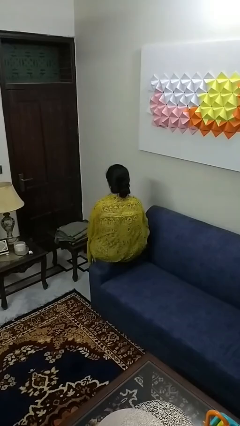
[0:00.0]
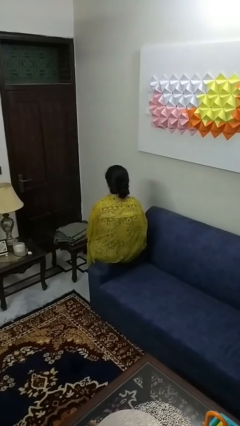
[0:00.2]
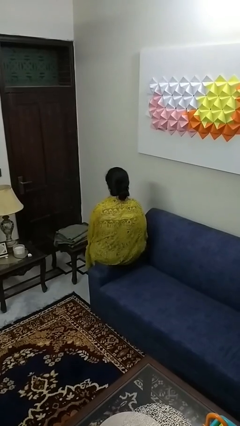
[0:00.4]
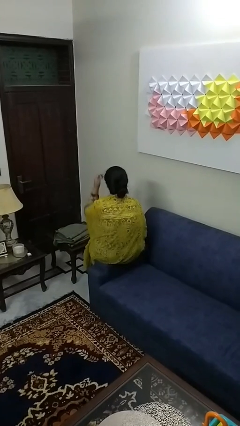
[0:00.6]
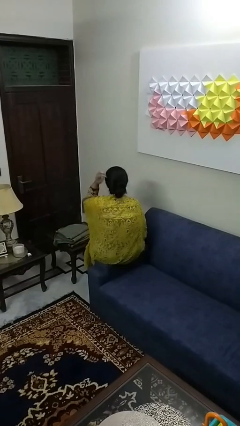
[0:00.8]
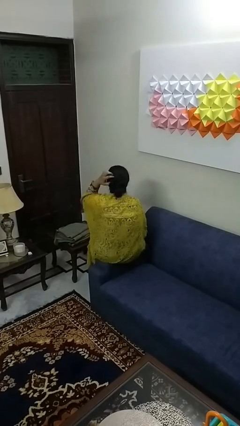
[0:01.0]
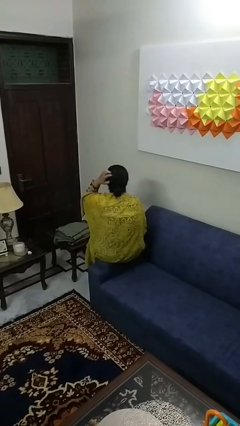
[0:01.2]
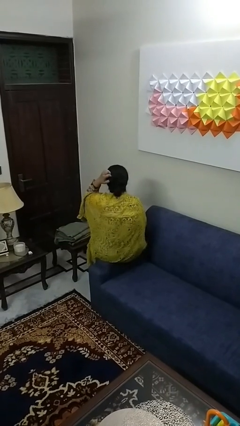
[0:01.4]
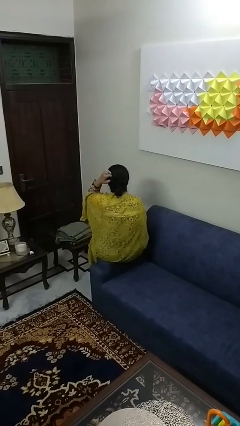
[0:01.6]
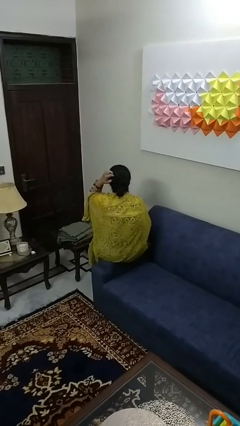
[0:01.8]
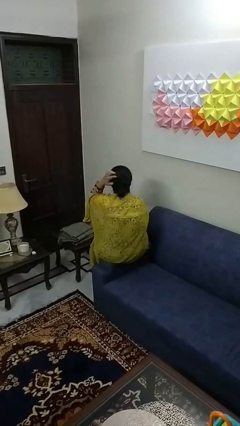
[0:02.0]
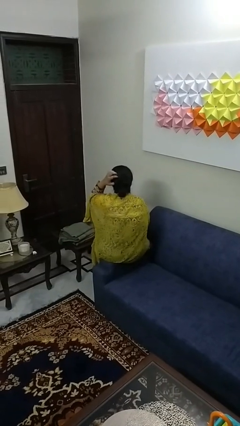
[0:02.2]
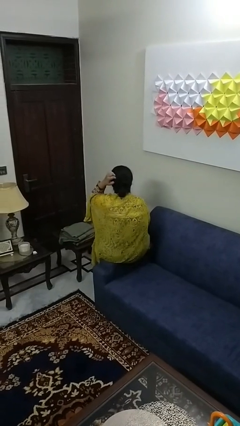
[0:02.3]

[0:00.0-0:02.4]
person scratches face

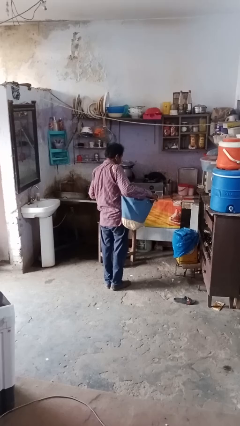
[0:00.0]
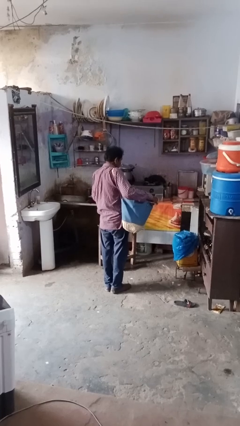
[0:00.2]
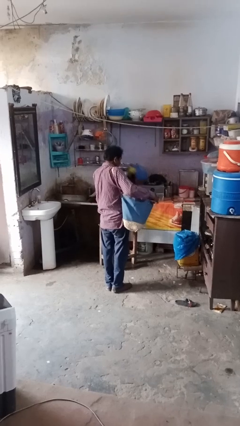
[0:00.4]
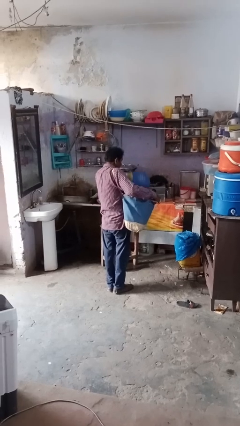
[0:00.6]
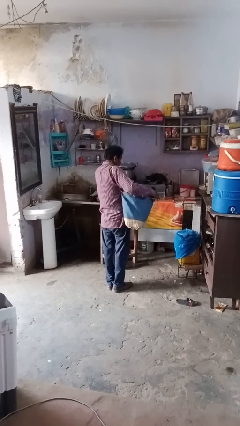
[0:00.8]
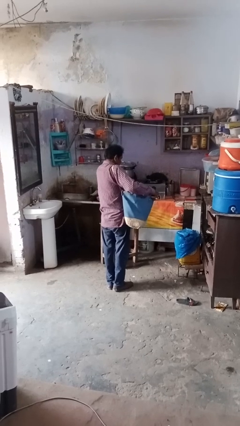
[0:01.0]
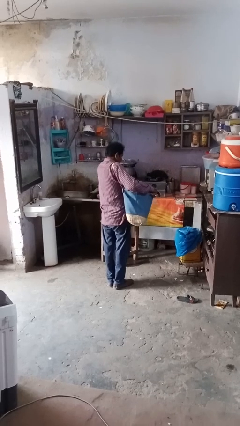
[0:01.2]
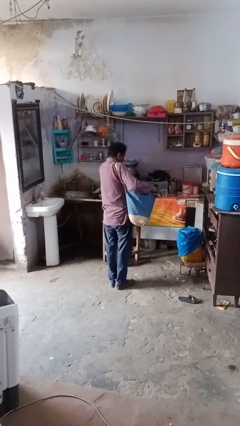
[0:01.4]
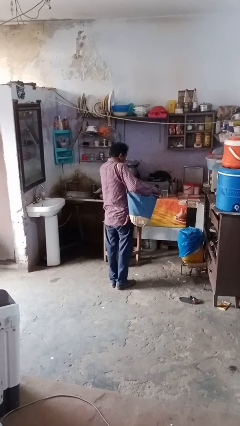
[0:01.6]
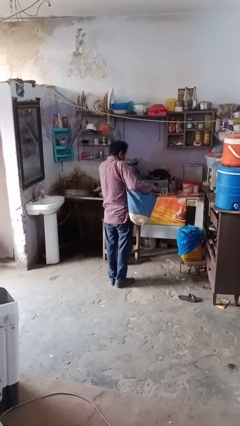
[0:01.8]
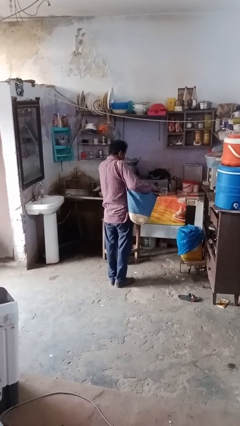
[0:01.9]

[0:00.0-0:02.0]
person puts object into bag

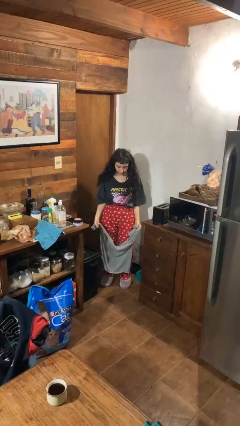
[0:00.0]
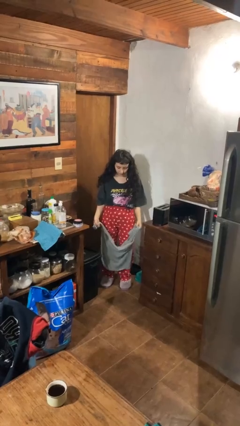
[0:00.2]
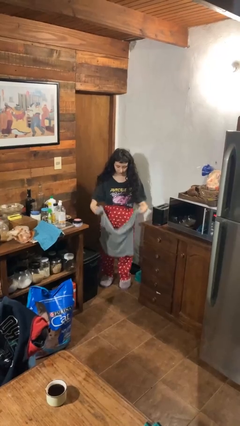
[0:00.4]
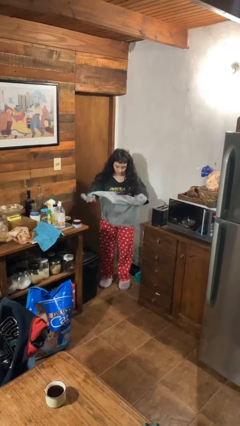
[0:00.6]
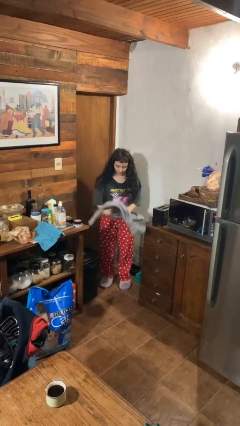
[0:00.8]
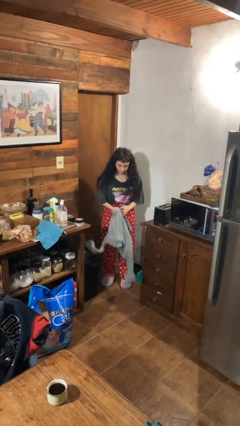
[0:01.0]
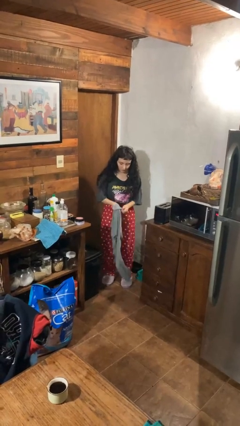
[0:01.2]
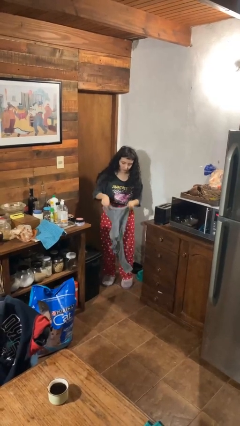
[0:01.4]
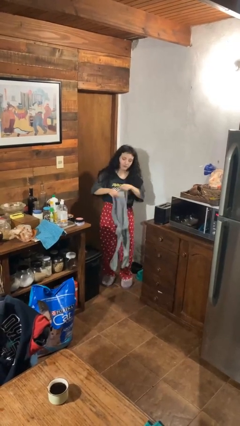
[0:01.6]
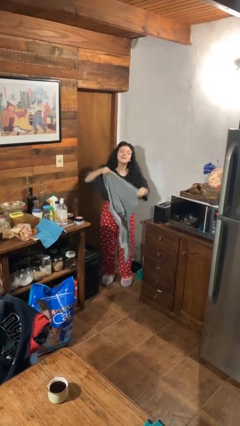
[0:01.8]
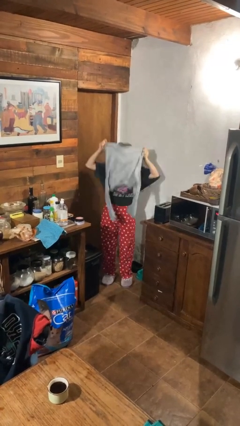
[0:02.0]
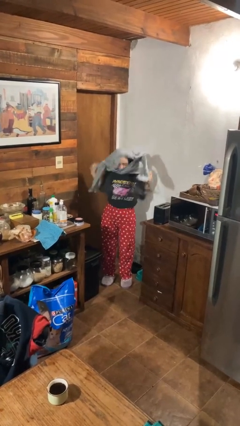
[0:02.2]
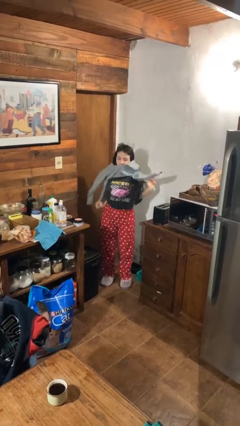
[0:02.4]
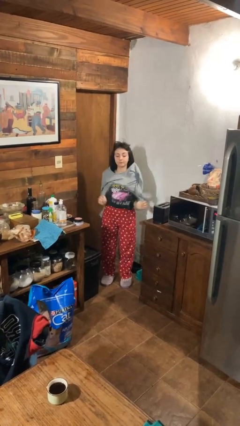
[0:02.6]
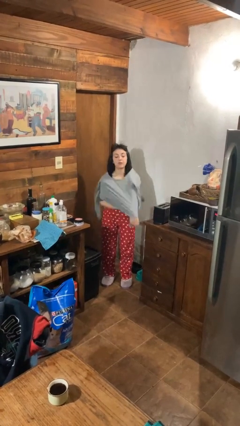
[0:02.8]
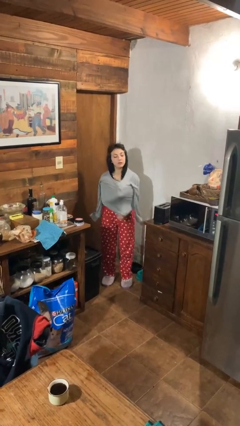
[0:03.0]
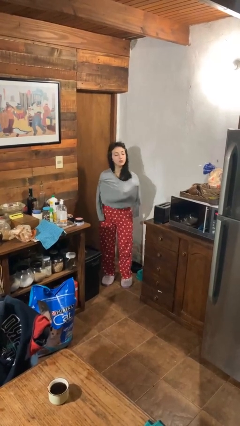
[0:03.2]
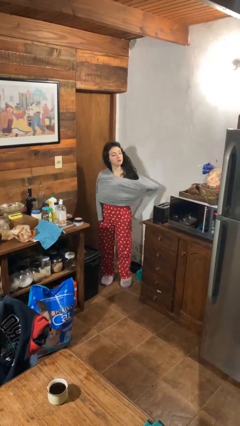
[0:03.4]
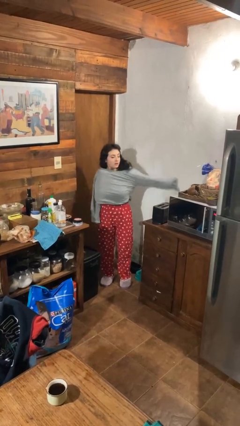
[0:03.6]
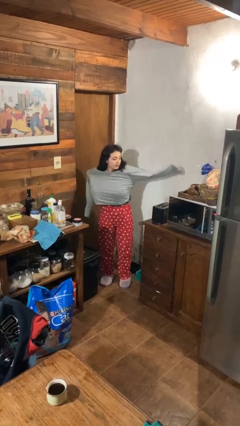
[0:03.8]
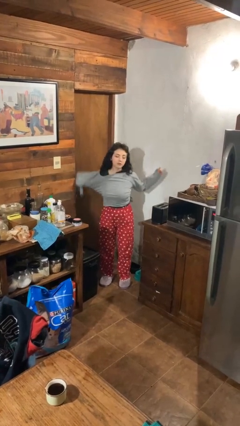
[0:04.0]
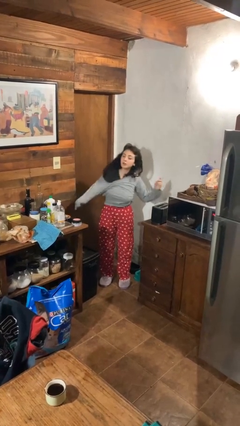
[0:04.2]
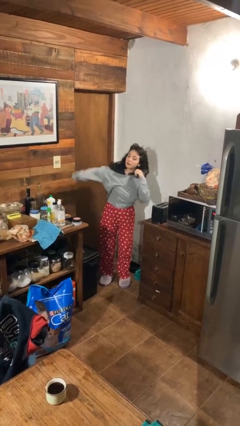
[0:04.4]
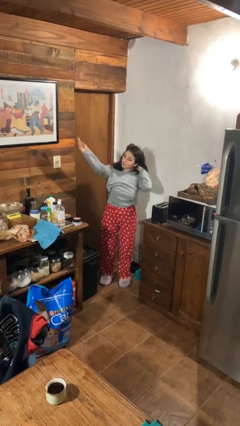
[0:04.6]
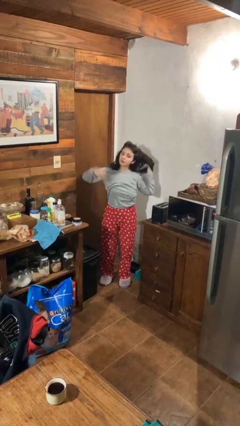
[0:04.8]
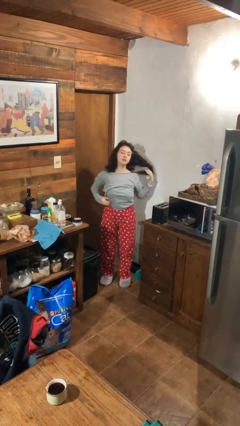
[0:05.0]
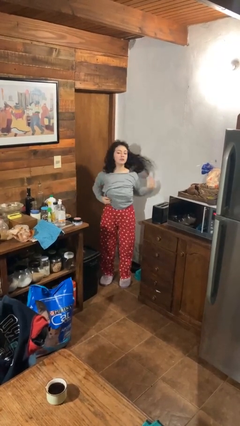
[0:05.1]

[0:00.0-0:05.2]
person puts on shirt

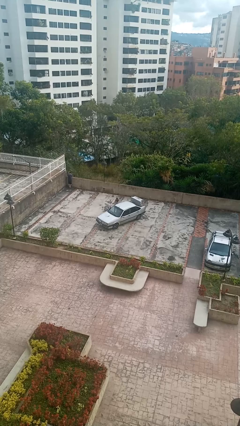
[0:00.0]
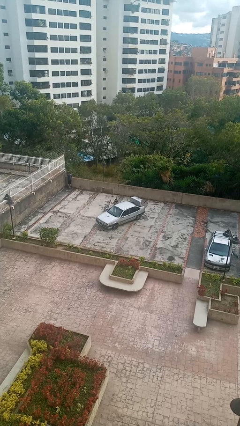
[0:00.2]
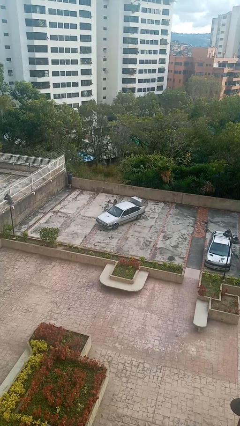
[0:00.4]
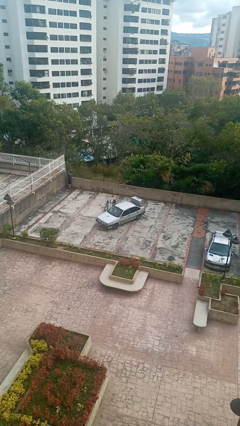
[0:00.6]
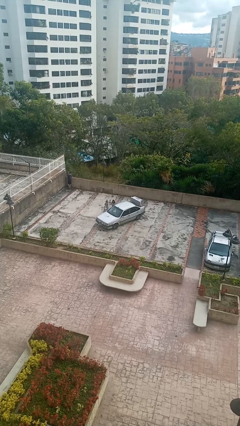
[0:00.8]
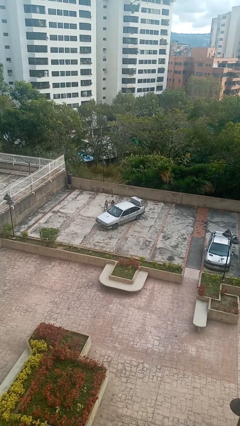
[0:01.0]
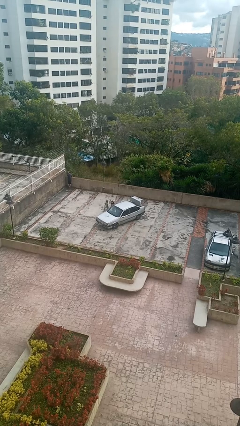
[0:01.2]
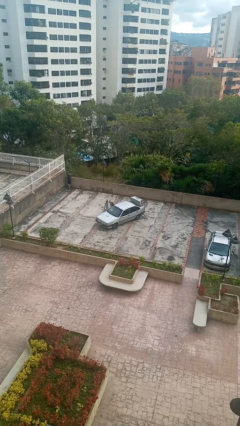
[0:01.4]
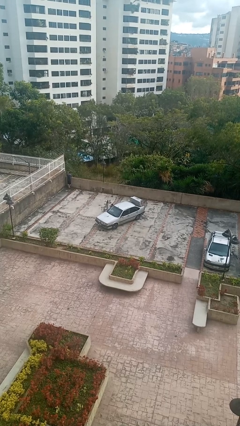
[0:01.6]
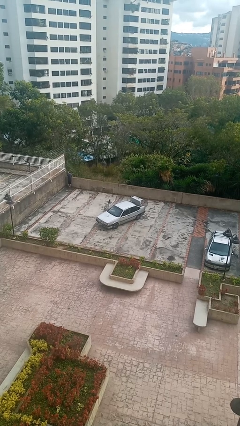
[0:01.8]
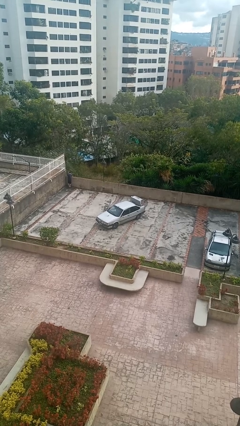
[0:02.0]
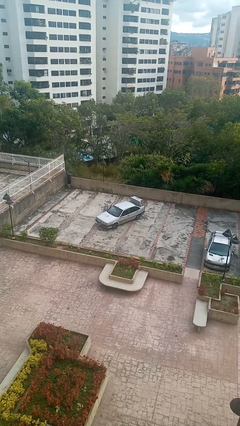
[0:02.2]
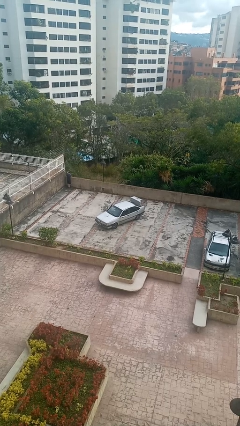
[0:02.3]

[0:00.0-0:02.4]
car picks up person

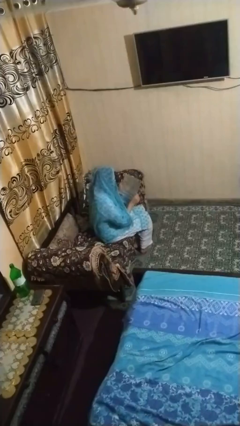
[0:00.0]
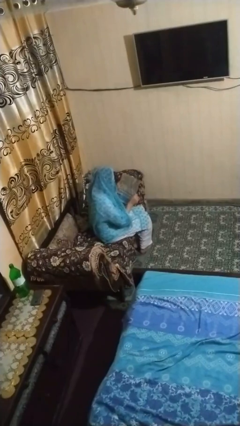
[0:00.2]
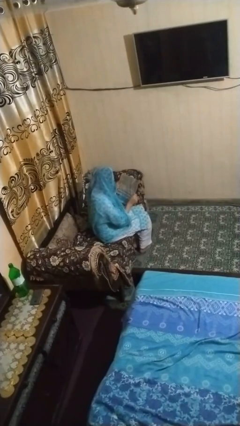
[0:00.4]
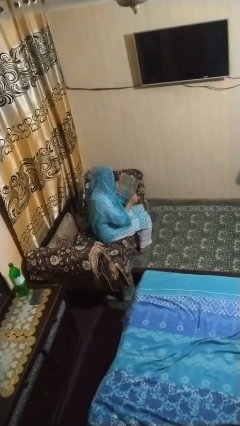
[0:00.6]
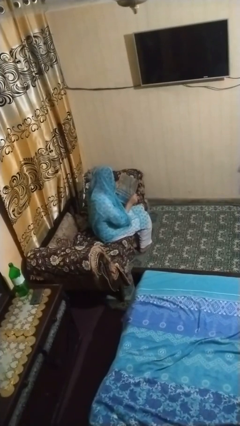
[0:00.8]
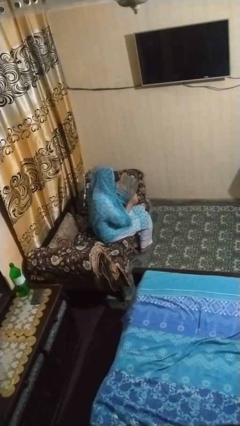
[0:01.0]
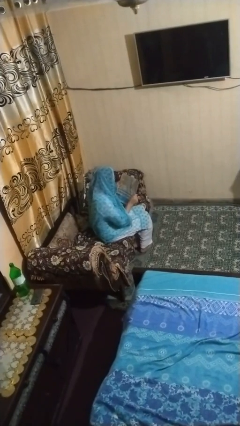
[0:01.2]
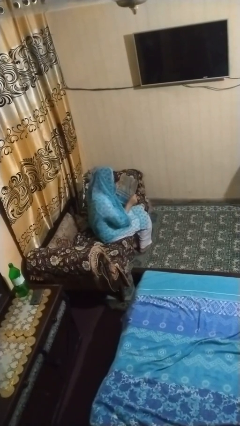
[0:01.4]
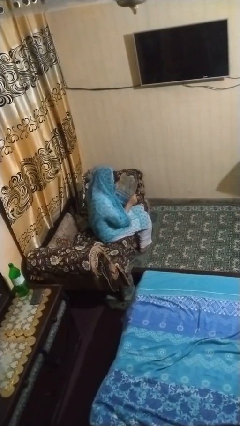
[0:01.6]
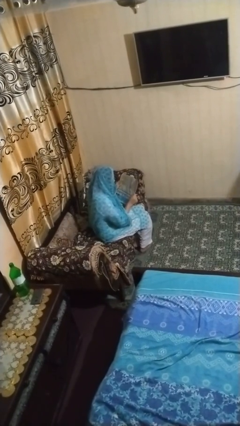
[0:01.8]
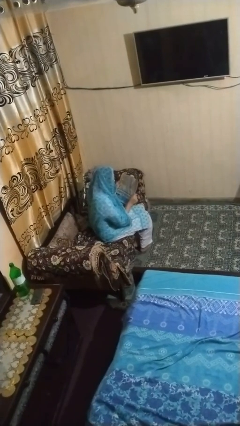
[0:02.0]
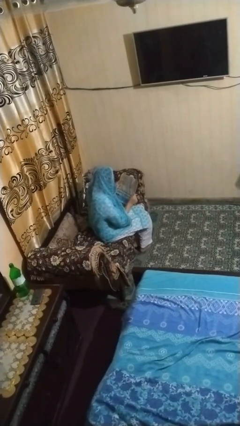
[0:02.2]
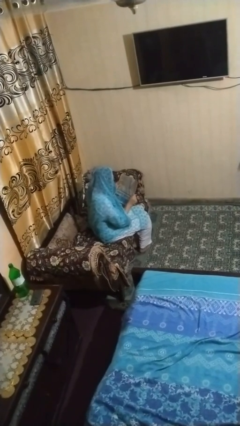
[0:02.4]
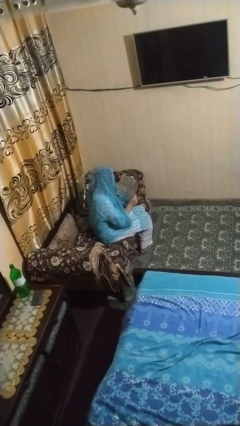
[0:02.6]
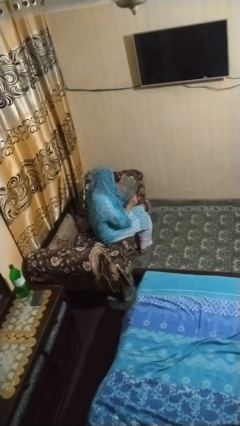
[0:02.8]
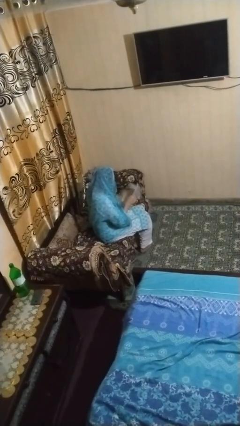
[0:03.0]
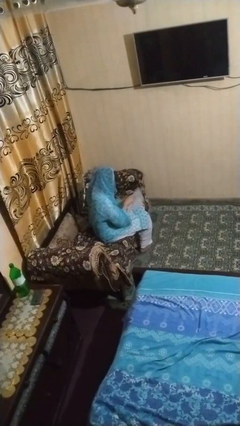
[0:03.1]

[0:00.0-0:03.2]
person reads newspaper

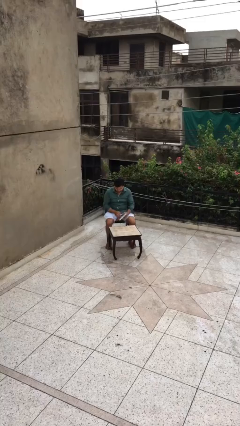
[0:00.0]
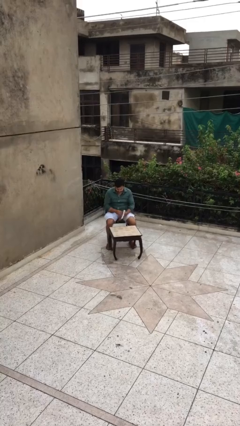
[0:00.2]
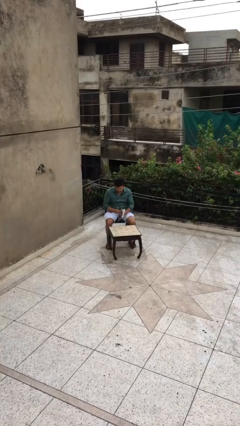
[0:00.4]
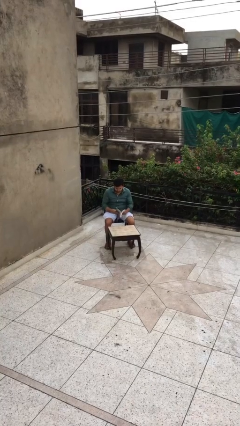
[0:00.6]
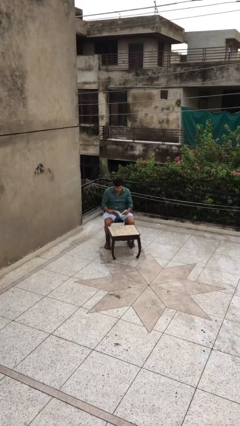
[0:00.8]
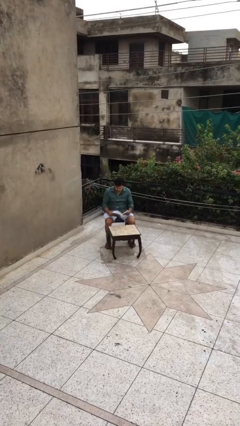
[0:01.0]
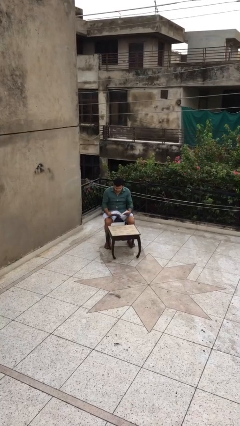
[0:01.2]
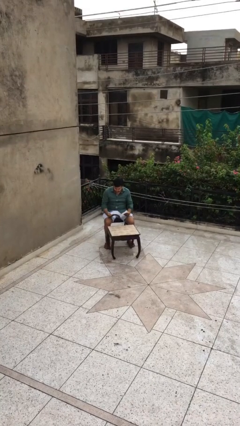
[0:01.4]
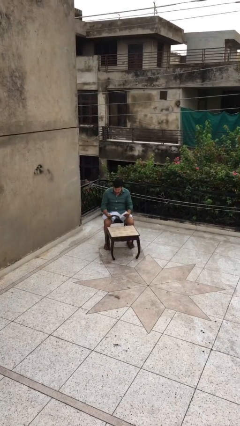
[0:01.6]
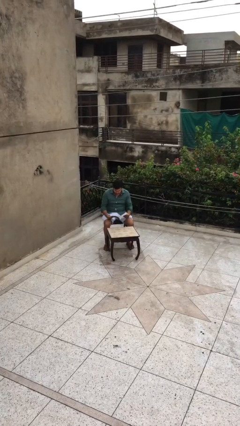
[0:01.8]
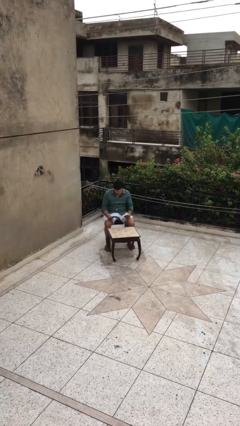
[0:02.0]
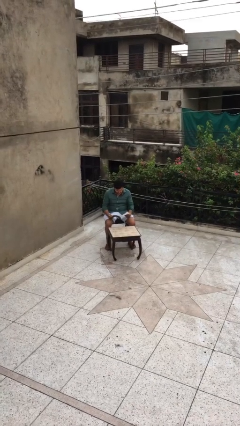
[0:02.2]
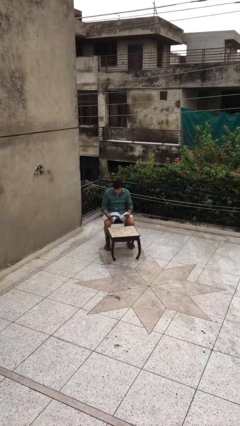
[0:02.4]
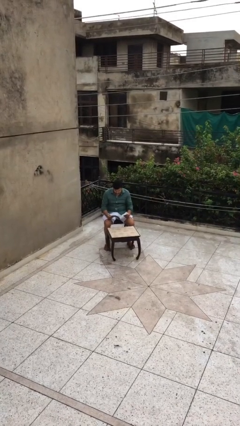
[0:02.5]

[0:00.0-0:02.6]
person reads document
